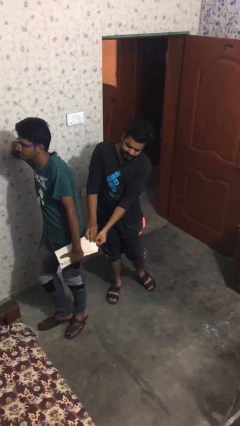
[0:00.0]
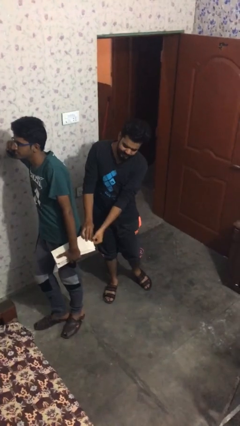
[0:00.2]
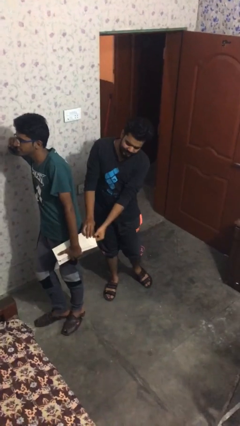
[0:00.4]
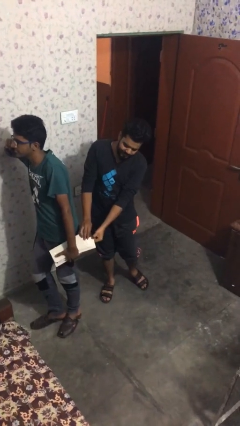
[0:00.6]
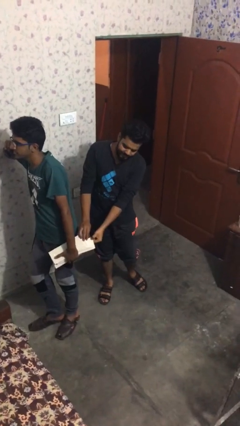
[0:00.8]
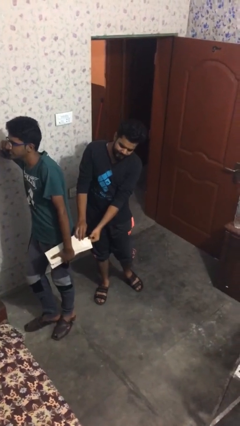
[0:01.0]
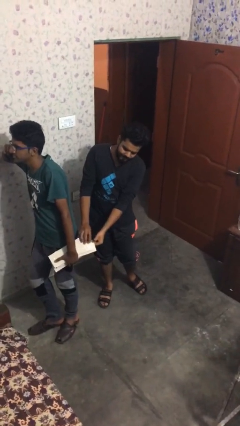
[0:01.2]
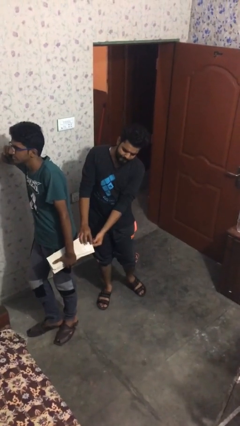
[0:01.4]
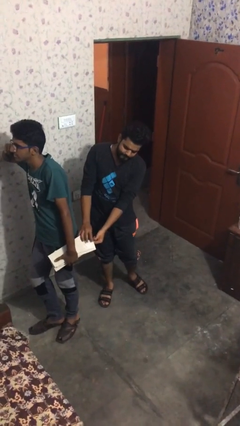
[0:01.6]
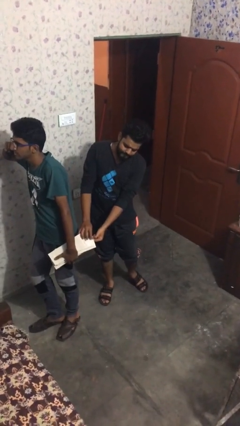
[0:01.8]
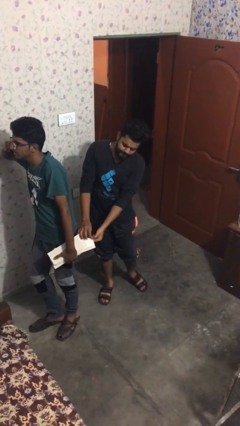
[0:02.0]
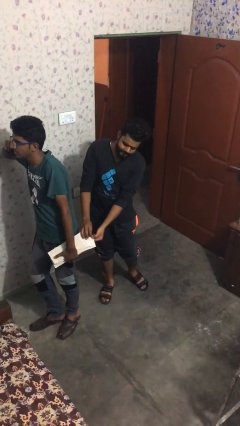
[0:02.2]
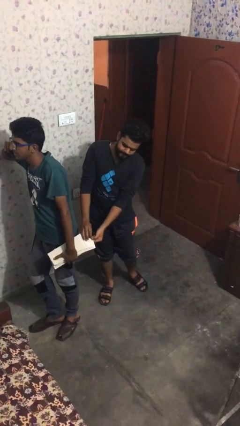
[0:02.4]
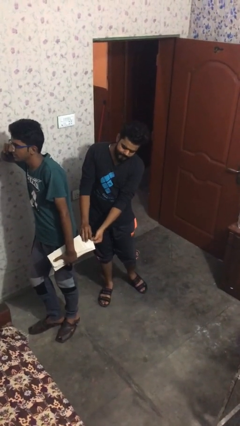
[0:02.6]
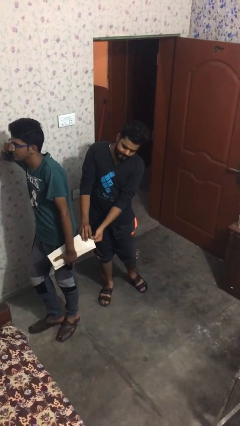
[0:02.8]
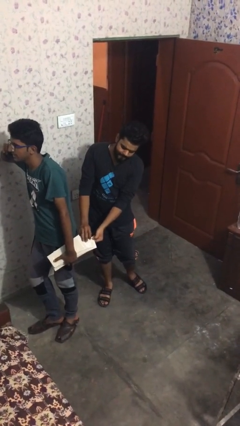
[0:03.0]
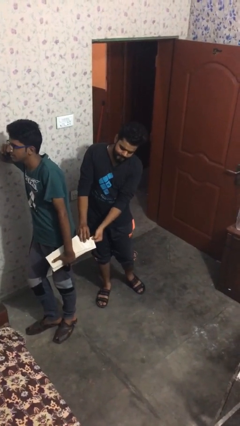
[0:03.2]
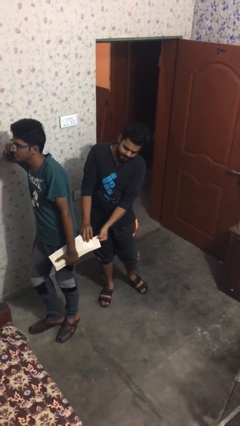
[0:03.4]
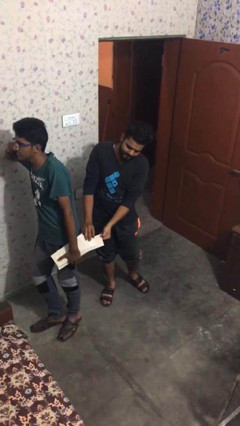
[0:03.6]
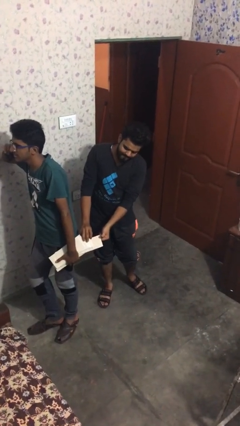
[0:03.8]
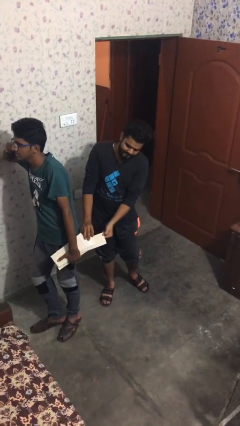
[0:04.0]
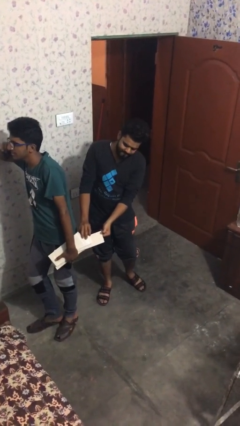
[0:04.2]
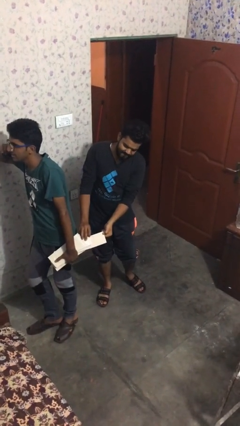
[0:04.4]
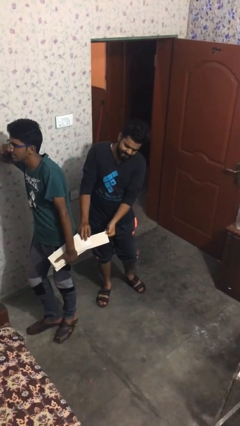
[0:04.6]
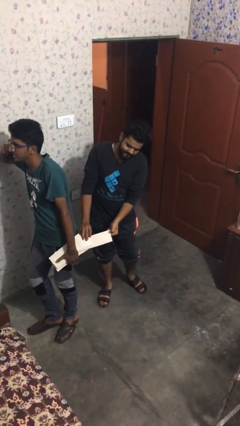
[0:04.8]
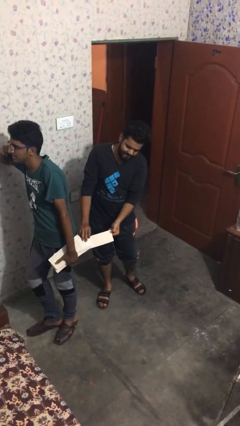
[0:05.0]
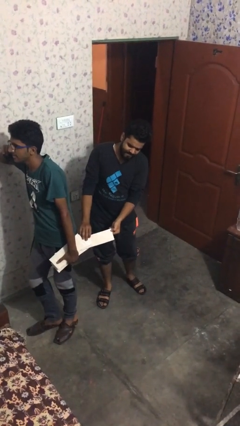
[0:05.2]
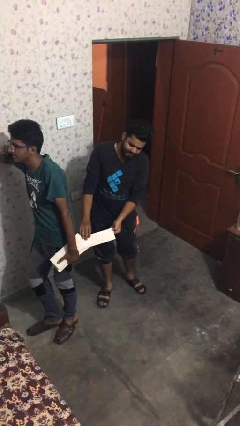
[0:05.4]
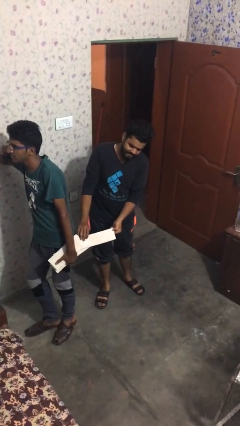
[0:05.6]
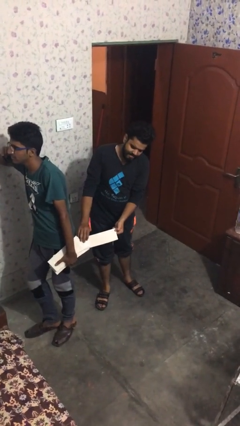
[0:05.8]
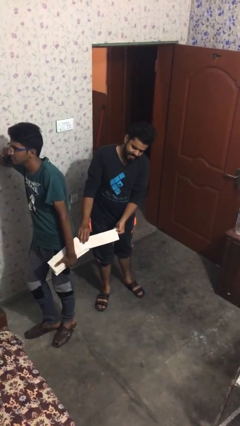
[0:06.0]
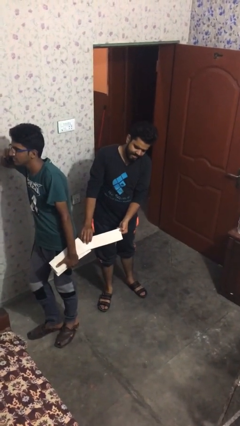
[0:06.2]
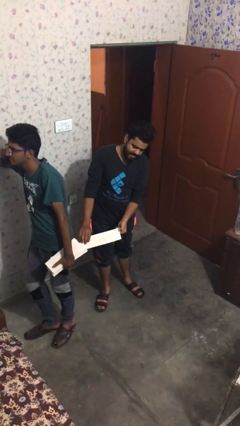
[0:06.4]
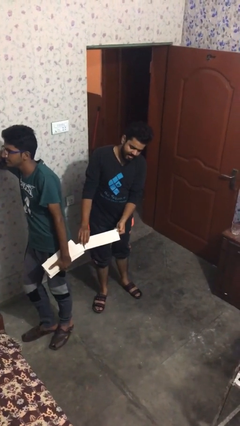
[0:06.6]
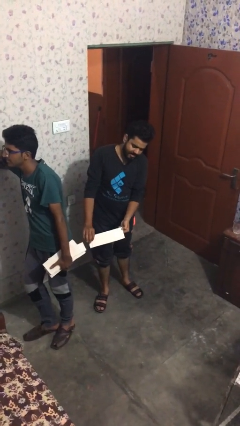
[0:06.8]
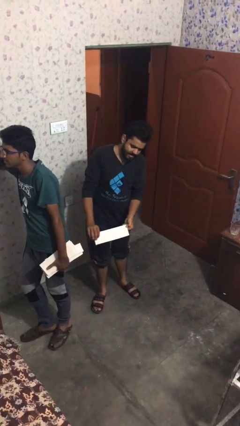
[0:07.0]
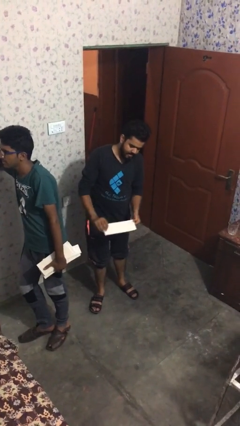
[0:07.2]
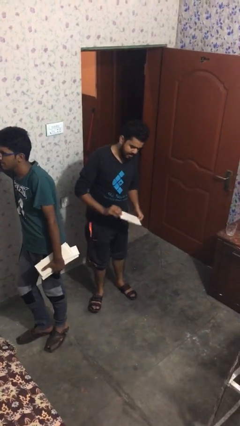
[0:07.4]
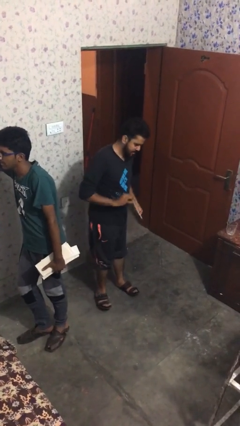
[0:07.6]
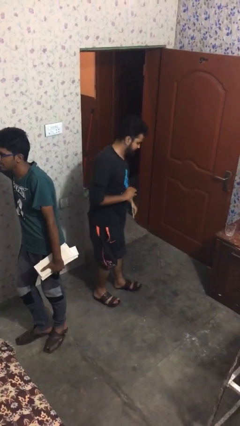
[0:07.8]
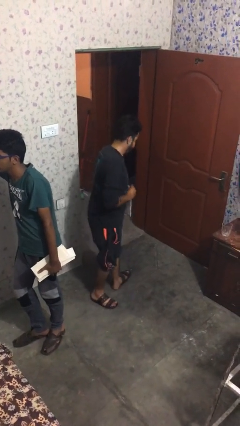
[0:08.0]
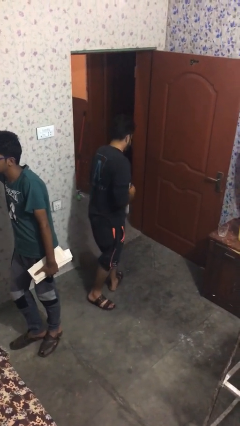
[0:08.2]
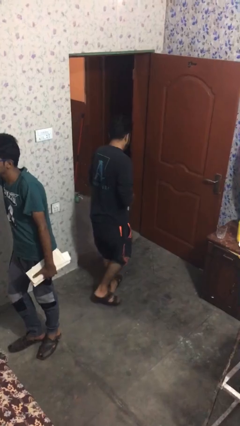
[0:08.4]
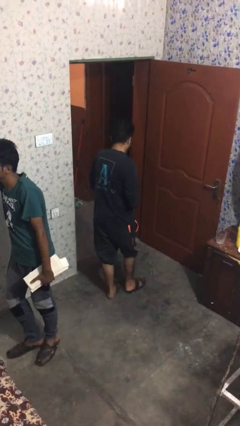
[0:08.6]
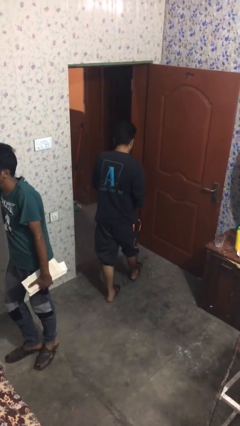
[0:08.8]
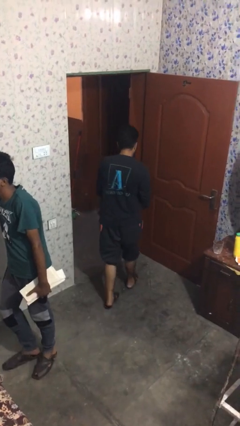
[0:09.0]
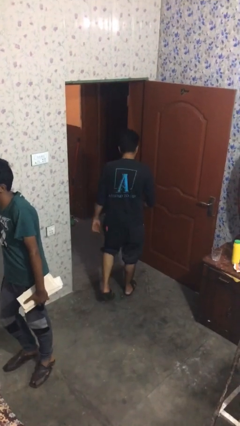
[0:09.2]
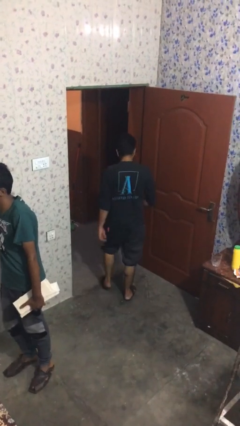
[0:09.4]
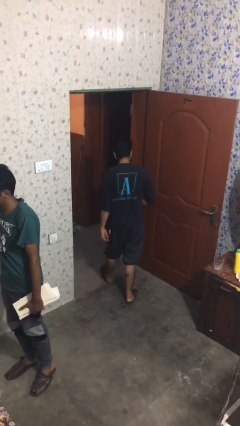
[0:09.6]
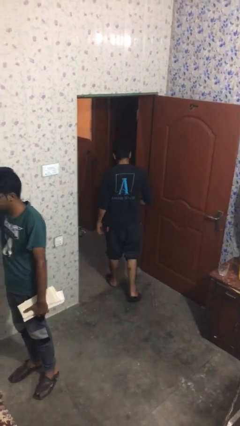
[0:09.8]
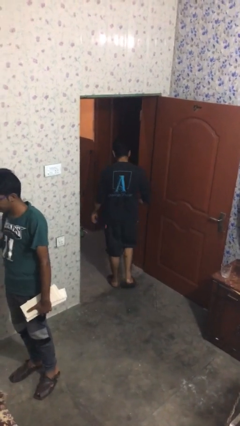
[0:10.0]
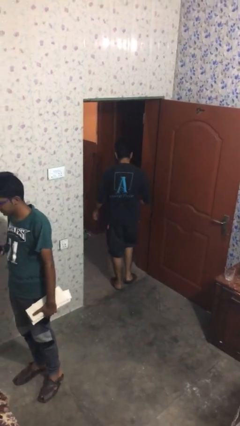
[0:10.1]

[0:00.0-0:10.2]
person steals object from person

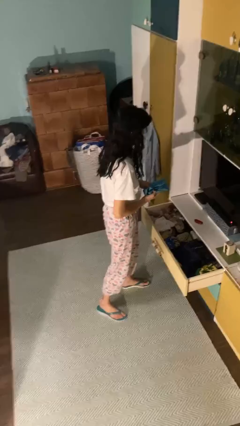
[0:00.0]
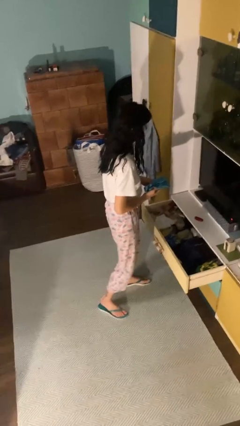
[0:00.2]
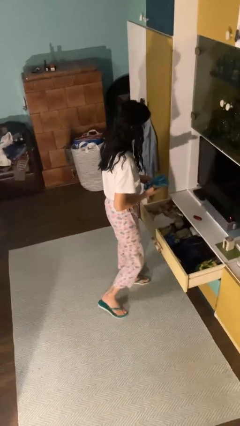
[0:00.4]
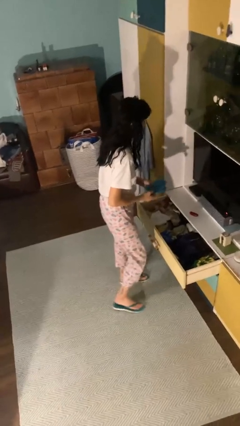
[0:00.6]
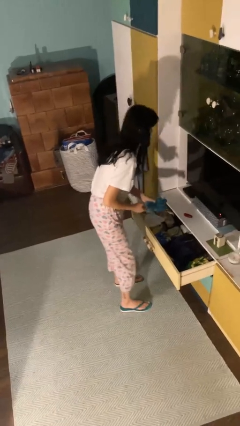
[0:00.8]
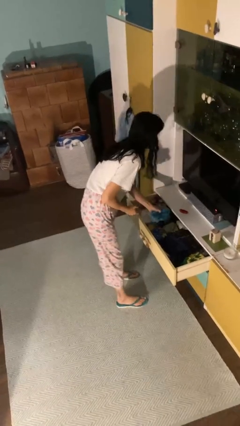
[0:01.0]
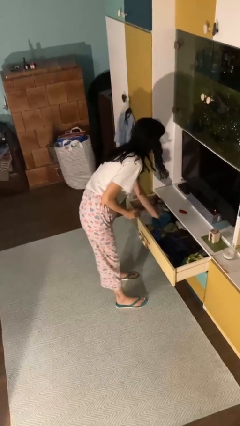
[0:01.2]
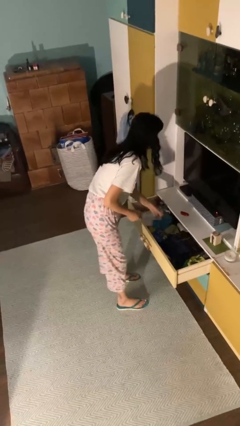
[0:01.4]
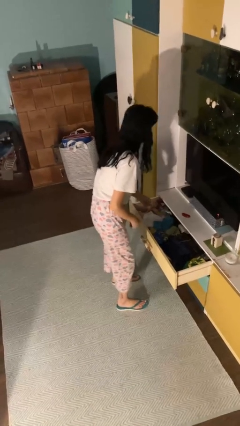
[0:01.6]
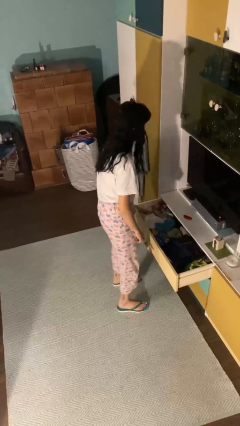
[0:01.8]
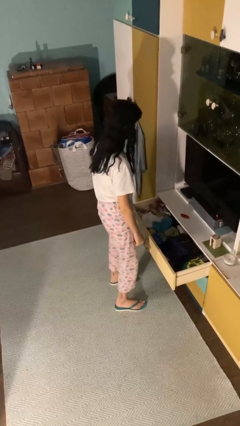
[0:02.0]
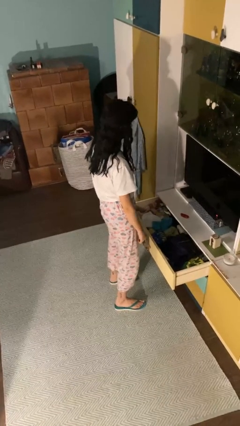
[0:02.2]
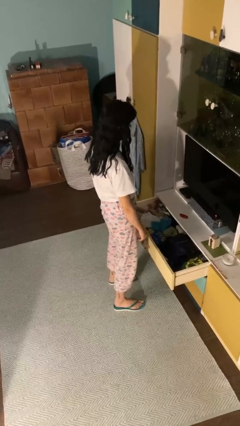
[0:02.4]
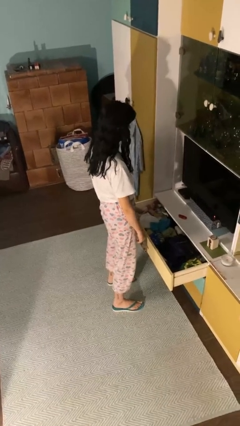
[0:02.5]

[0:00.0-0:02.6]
person puts clothes into dresser

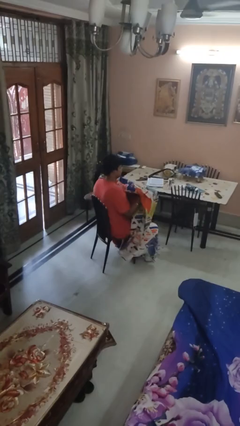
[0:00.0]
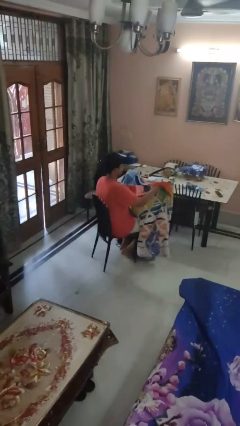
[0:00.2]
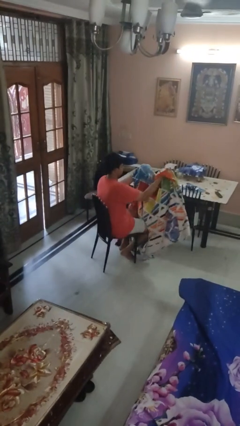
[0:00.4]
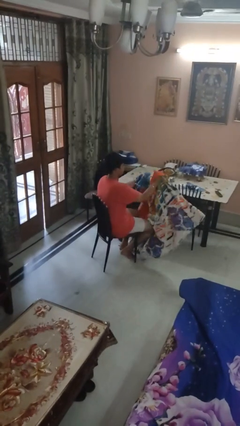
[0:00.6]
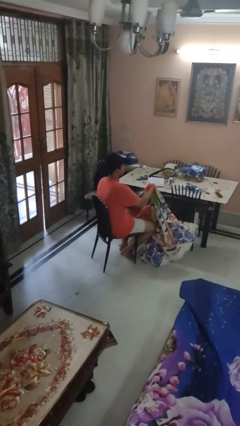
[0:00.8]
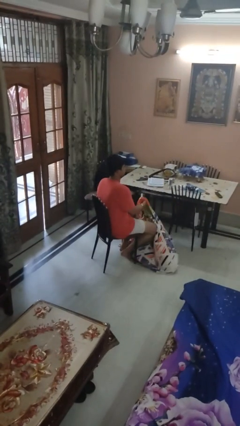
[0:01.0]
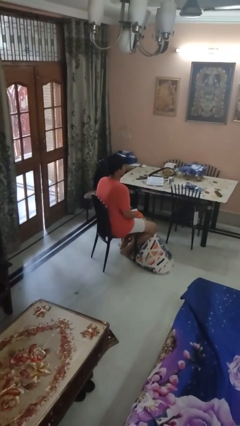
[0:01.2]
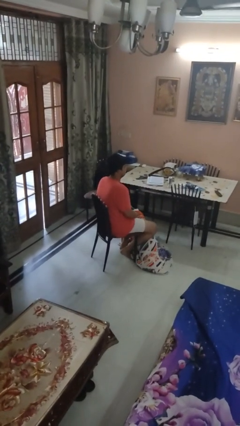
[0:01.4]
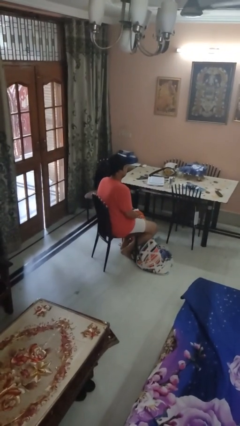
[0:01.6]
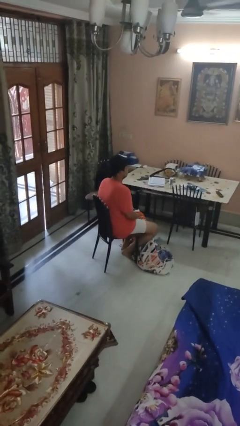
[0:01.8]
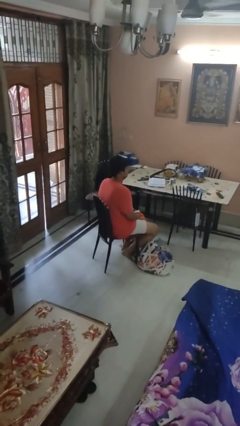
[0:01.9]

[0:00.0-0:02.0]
person uncovers with blanket

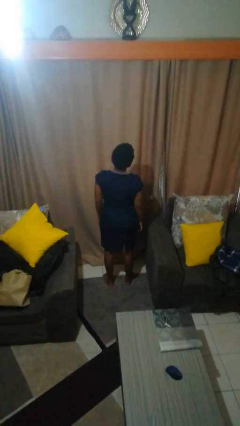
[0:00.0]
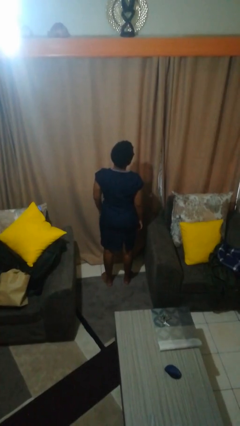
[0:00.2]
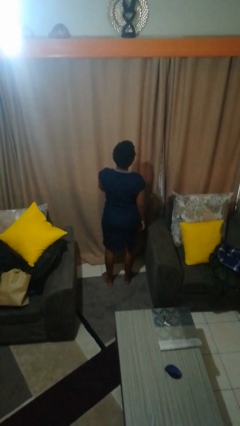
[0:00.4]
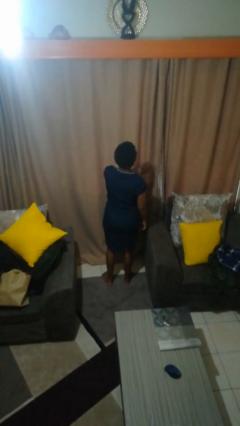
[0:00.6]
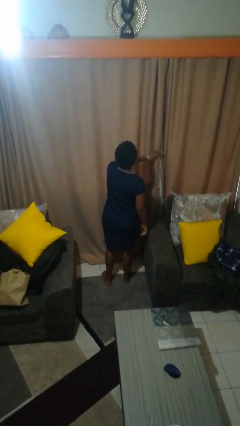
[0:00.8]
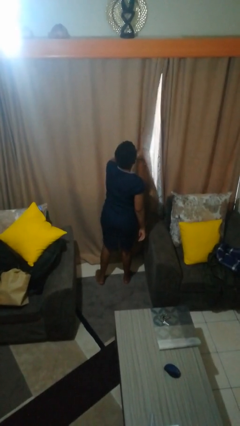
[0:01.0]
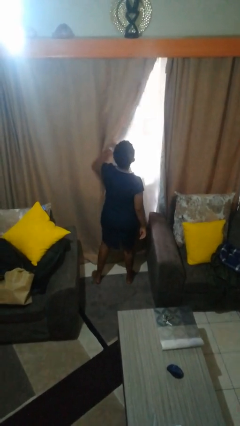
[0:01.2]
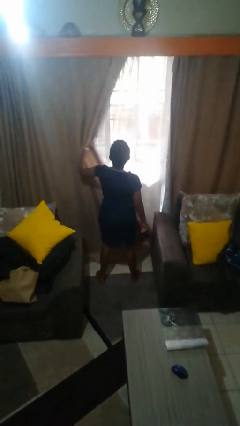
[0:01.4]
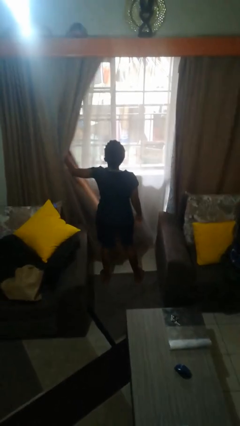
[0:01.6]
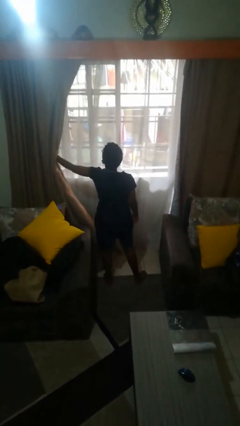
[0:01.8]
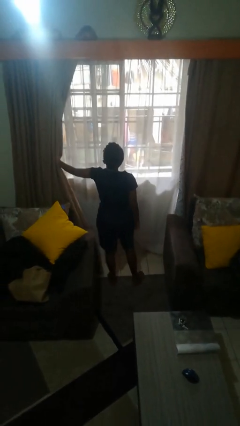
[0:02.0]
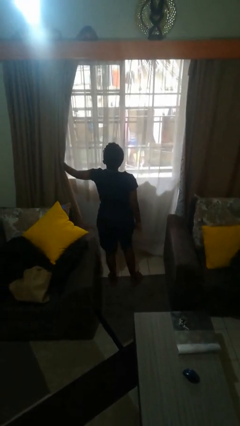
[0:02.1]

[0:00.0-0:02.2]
person opens curtains

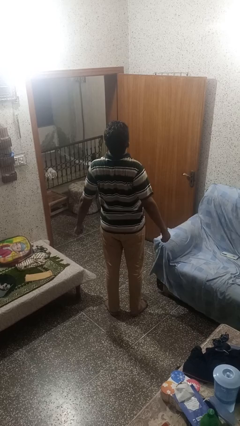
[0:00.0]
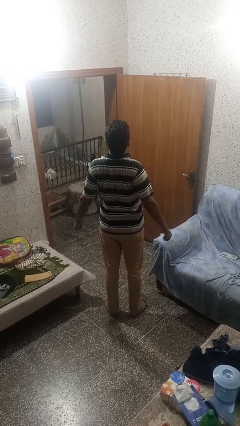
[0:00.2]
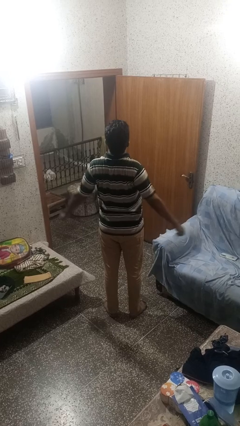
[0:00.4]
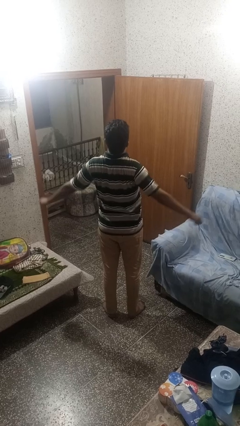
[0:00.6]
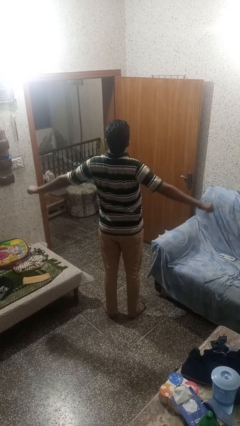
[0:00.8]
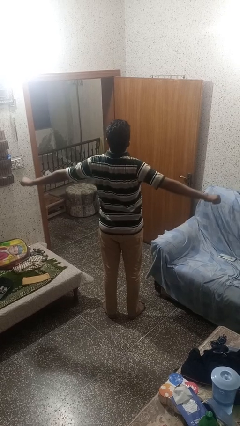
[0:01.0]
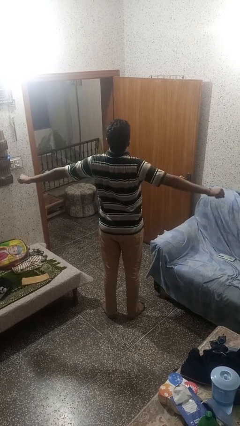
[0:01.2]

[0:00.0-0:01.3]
person stretches arms to side
